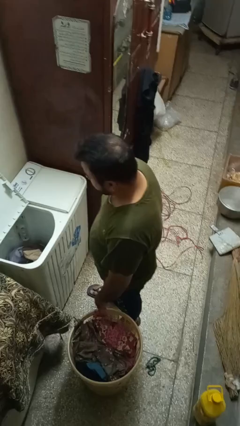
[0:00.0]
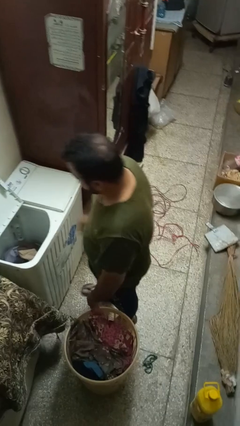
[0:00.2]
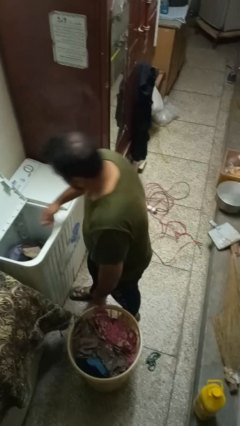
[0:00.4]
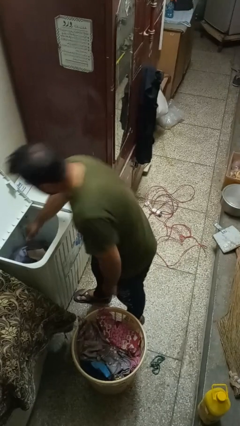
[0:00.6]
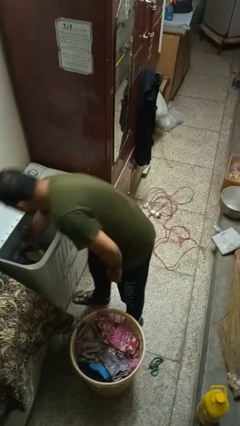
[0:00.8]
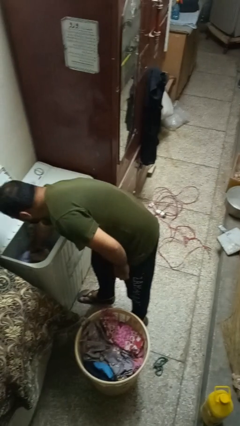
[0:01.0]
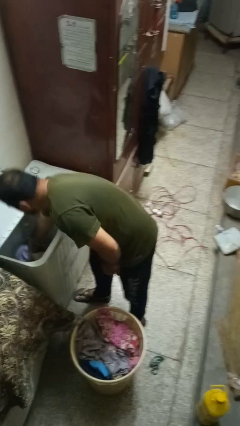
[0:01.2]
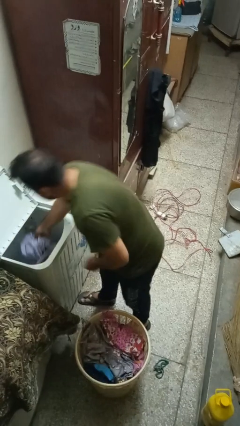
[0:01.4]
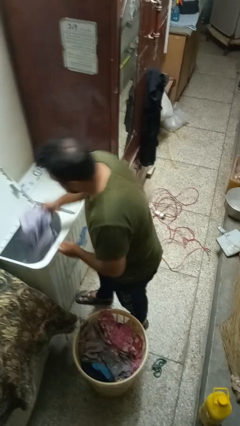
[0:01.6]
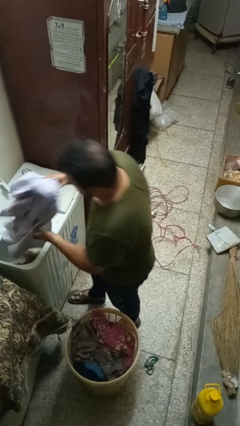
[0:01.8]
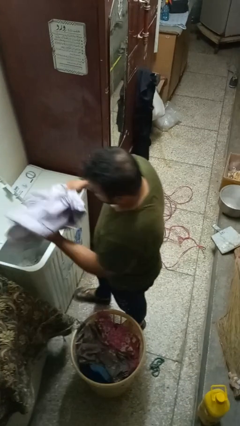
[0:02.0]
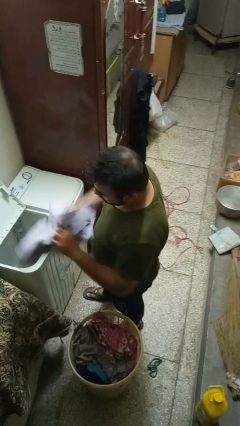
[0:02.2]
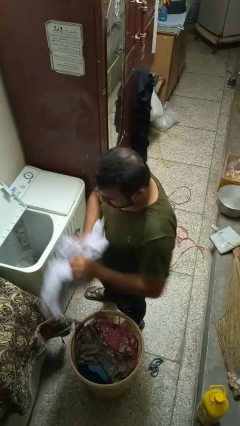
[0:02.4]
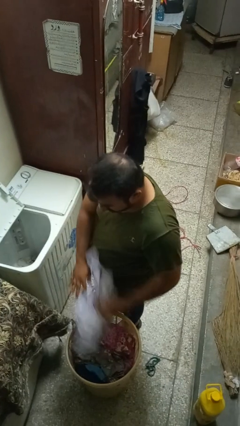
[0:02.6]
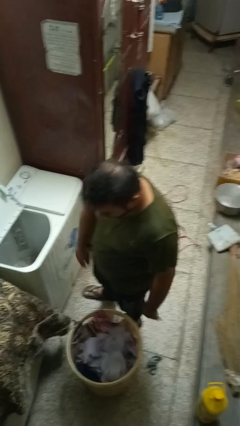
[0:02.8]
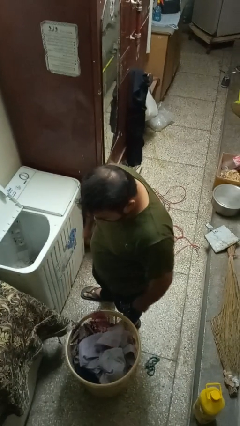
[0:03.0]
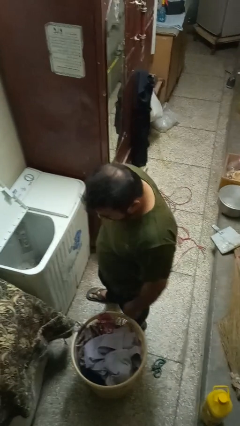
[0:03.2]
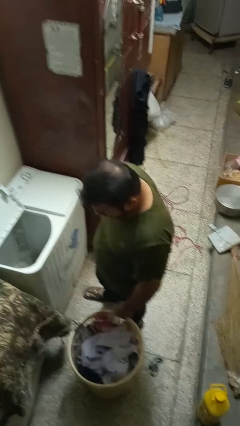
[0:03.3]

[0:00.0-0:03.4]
person unloads clotheswasher

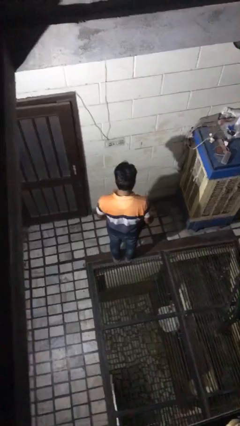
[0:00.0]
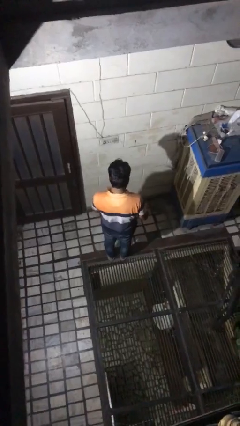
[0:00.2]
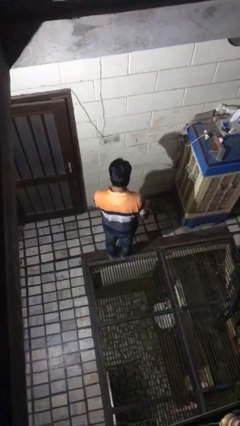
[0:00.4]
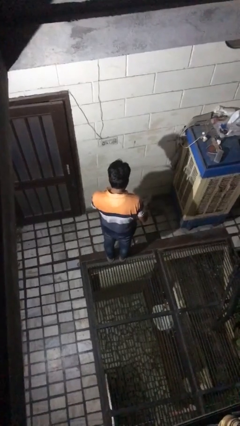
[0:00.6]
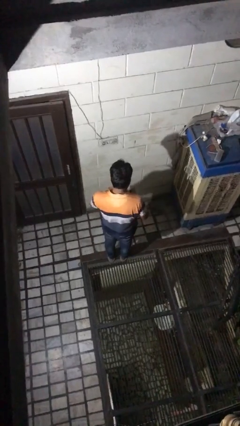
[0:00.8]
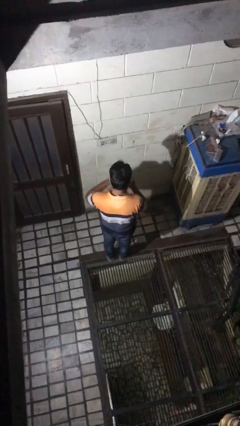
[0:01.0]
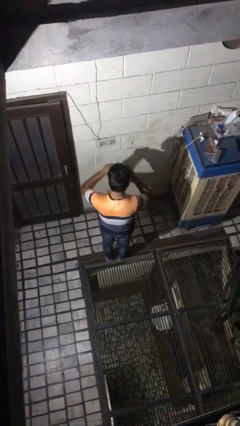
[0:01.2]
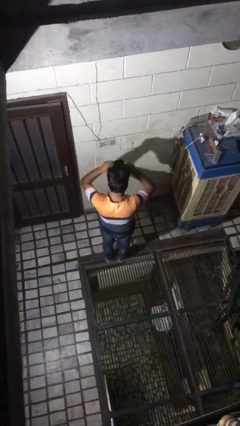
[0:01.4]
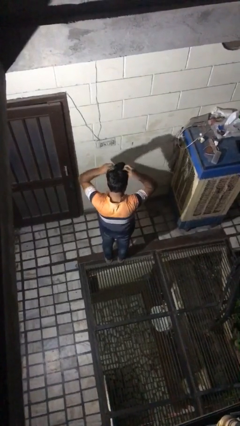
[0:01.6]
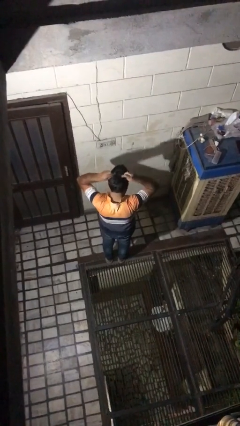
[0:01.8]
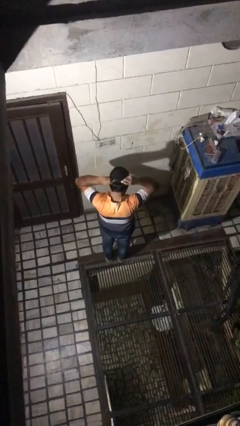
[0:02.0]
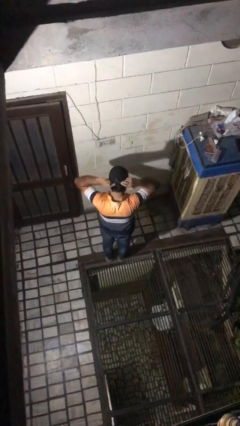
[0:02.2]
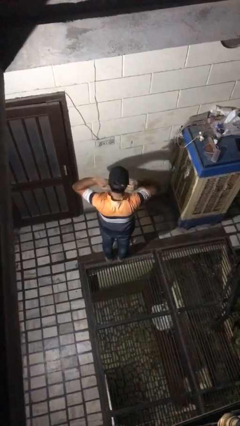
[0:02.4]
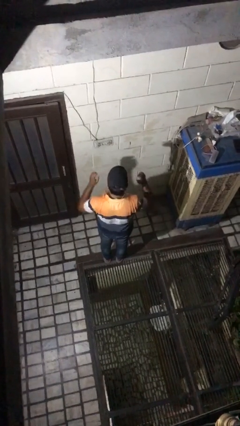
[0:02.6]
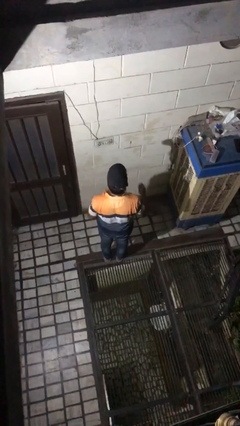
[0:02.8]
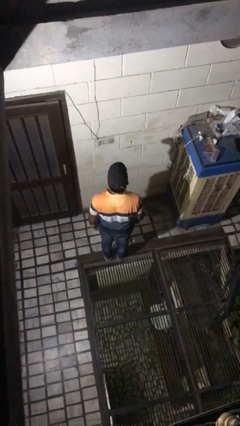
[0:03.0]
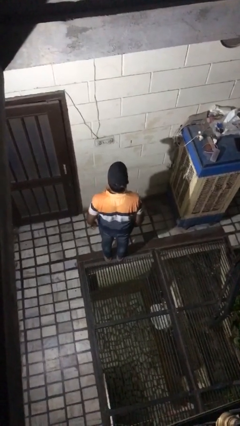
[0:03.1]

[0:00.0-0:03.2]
person puts on hat

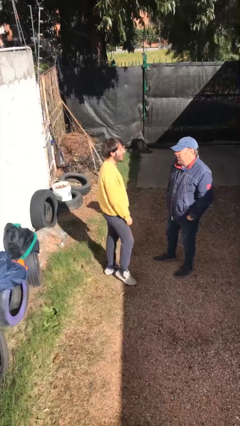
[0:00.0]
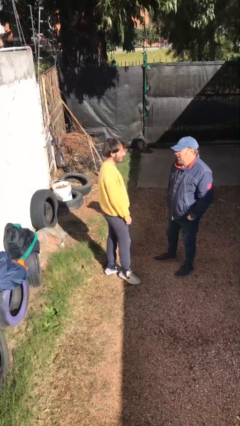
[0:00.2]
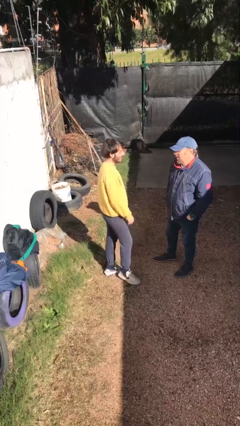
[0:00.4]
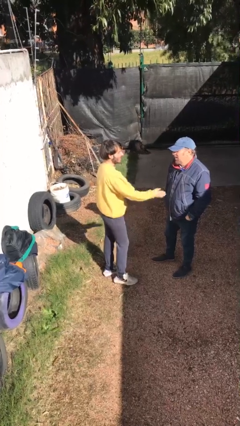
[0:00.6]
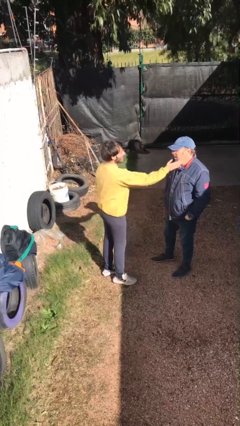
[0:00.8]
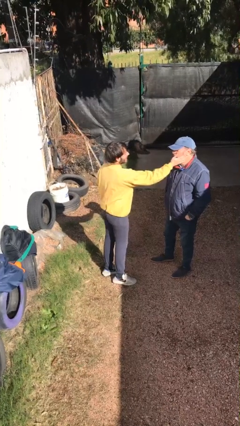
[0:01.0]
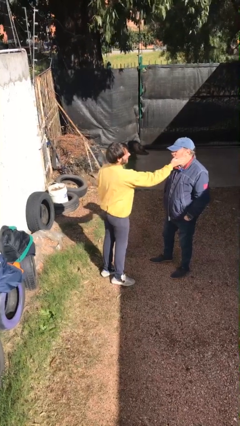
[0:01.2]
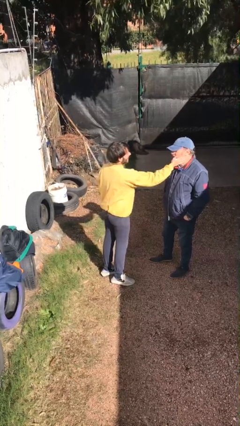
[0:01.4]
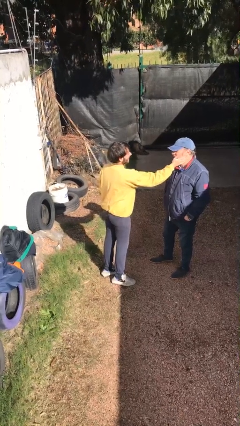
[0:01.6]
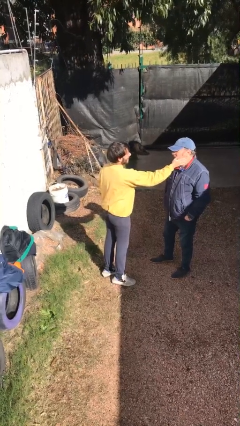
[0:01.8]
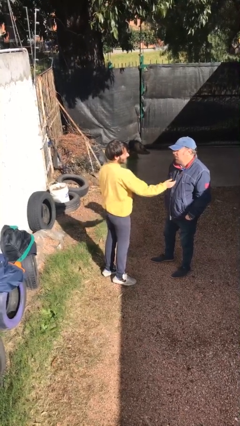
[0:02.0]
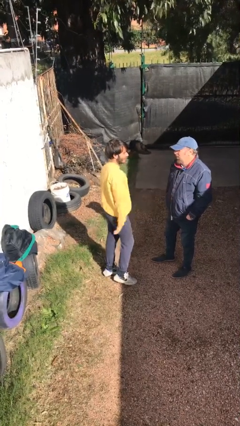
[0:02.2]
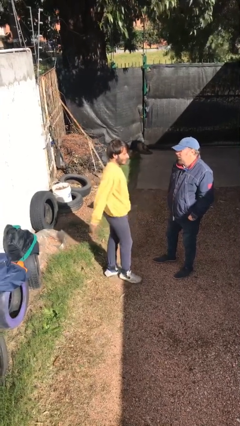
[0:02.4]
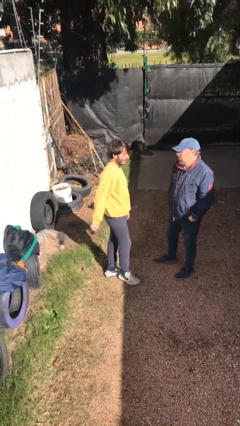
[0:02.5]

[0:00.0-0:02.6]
person touches face of person

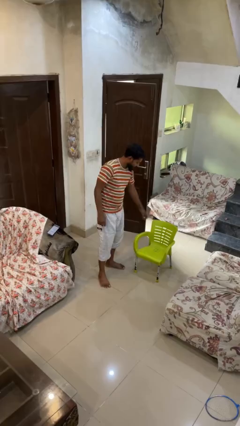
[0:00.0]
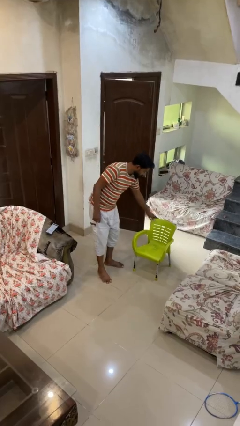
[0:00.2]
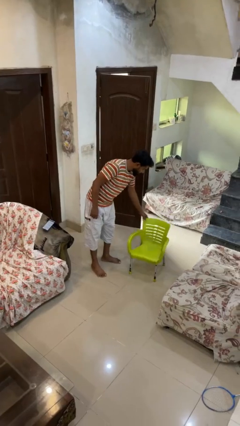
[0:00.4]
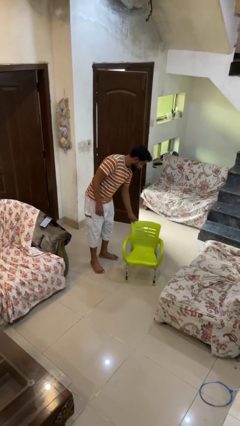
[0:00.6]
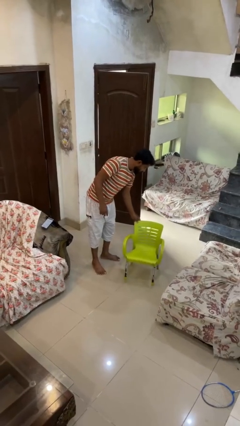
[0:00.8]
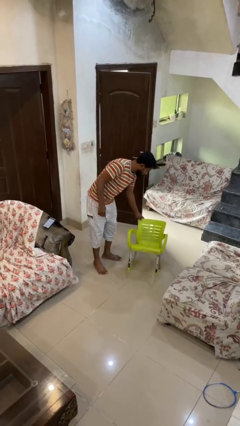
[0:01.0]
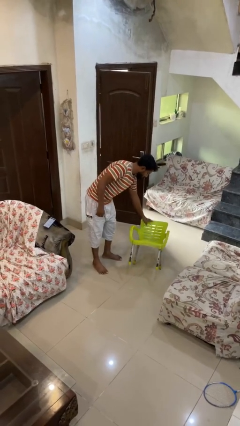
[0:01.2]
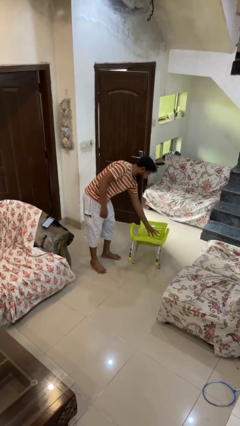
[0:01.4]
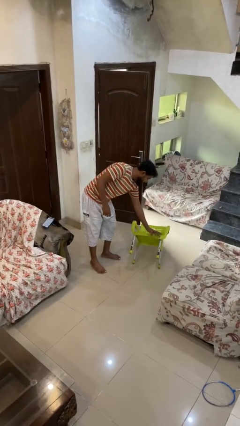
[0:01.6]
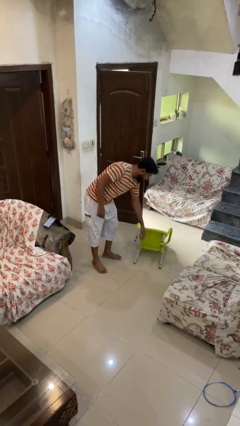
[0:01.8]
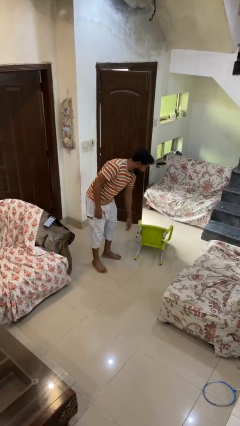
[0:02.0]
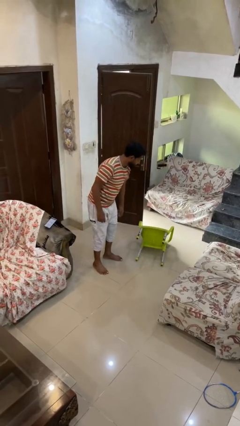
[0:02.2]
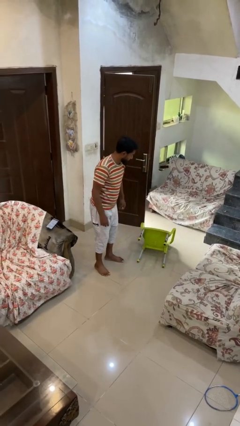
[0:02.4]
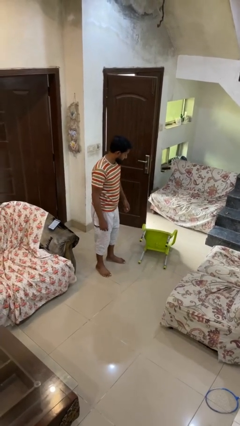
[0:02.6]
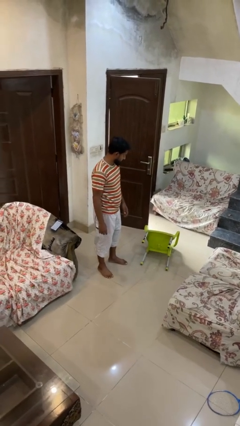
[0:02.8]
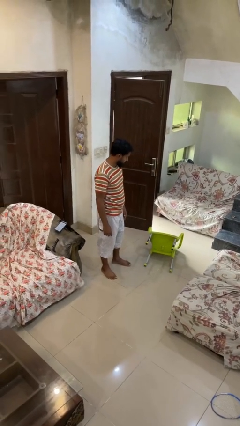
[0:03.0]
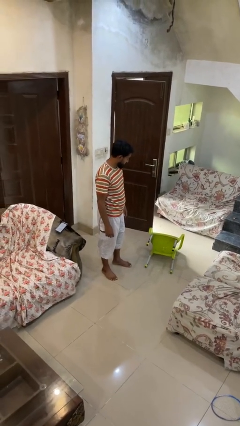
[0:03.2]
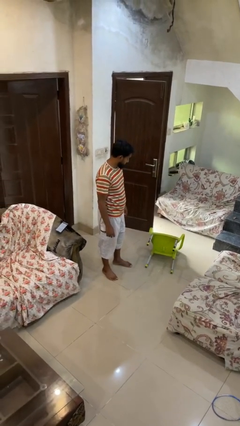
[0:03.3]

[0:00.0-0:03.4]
person knocks over furniture

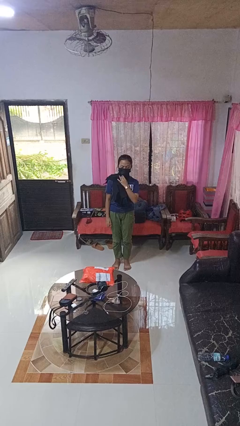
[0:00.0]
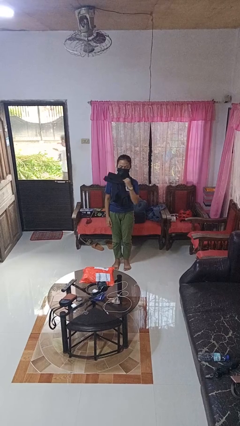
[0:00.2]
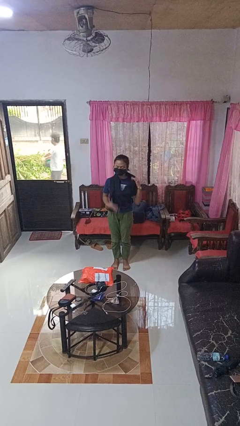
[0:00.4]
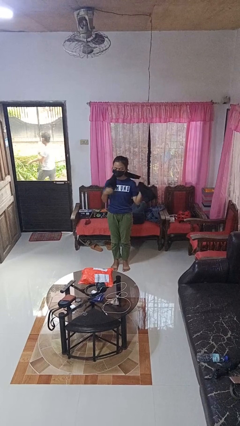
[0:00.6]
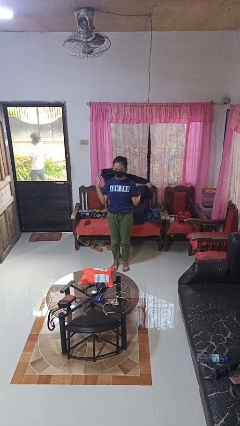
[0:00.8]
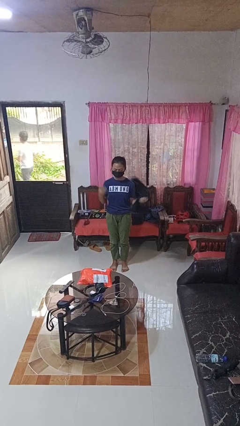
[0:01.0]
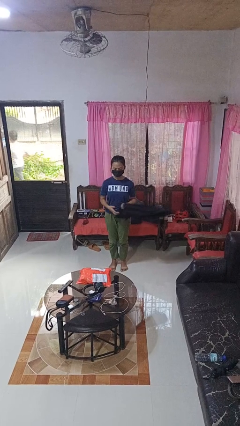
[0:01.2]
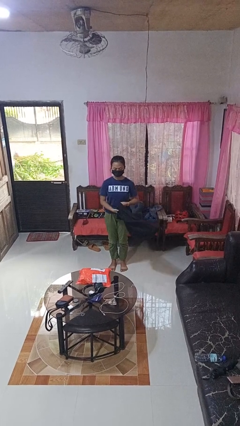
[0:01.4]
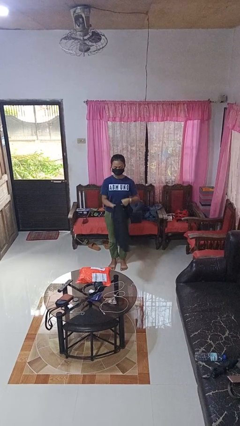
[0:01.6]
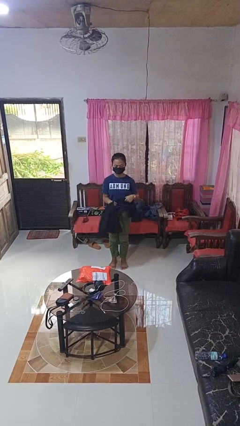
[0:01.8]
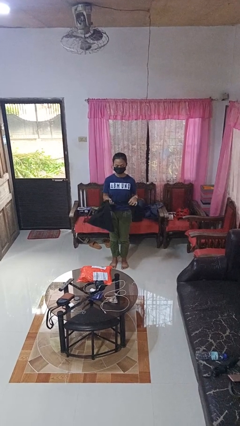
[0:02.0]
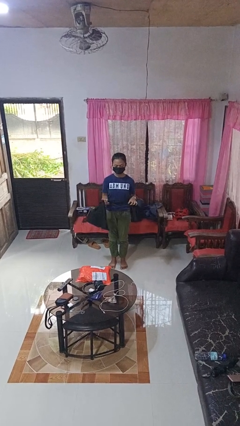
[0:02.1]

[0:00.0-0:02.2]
person takes off scarf

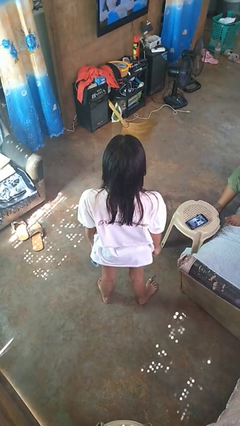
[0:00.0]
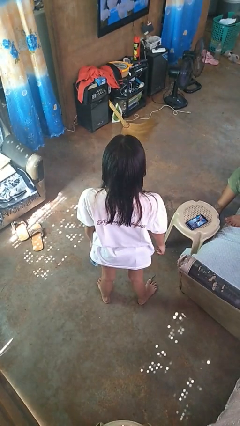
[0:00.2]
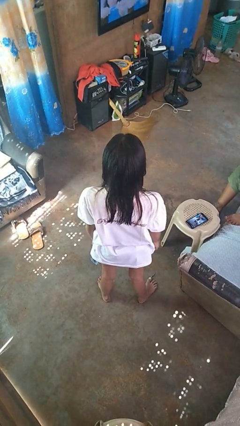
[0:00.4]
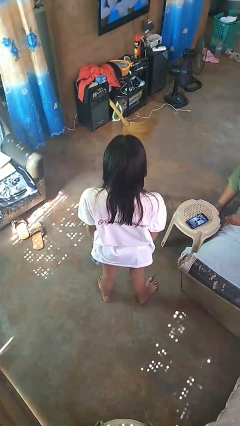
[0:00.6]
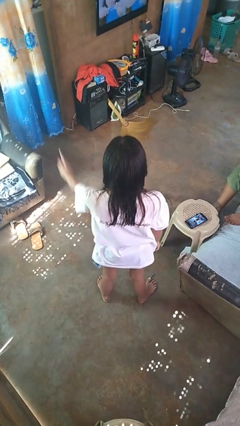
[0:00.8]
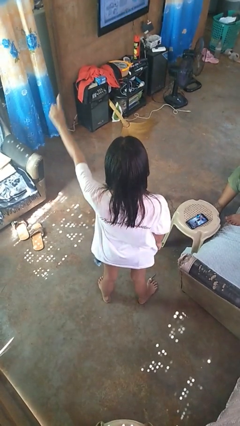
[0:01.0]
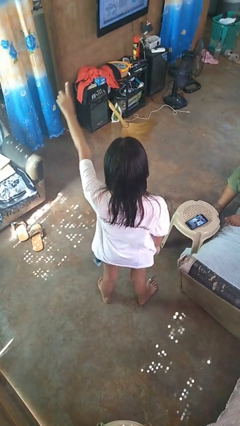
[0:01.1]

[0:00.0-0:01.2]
person gestures number three

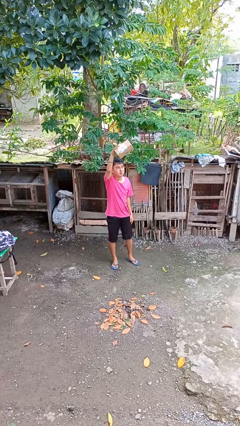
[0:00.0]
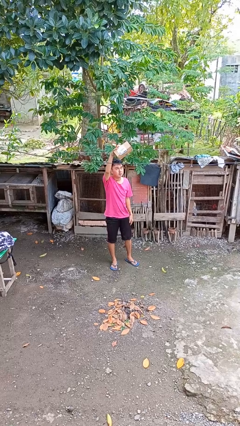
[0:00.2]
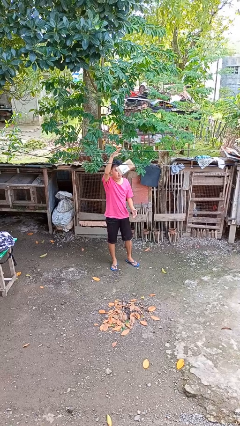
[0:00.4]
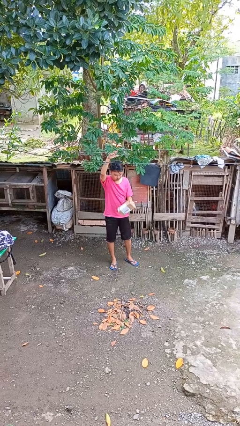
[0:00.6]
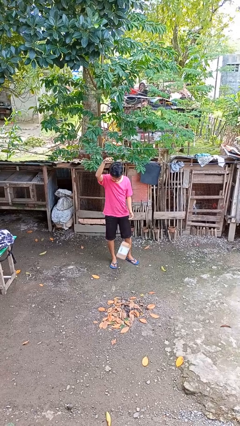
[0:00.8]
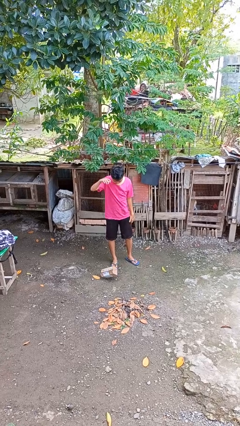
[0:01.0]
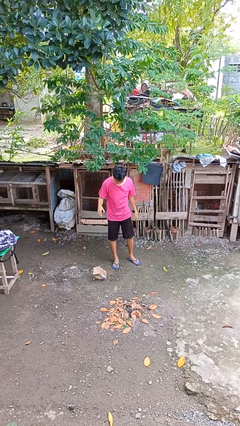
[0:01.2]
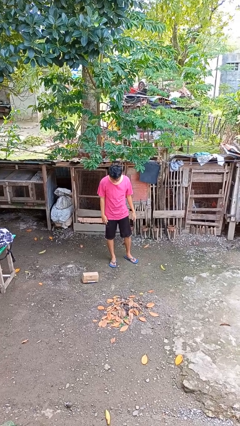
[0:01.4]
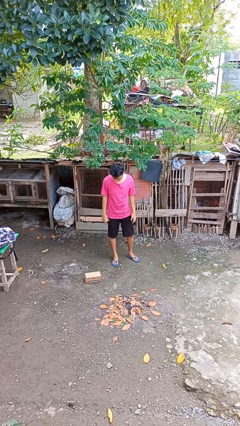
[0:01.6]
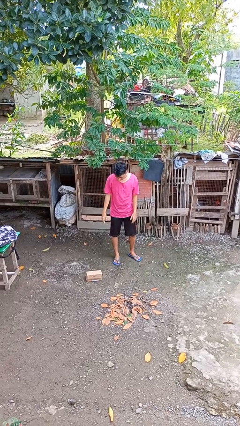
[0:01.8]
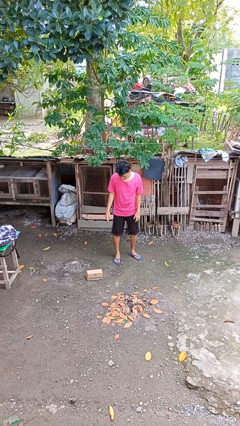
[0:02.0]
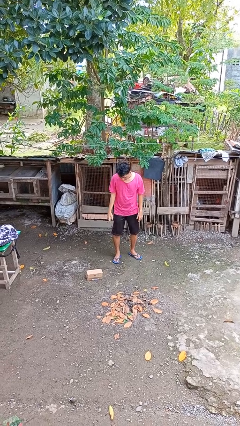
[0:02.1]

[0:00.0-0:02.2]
person drops object
